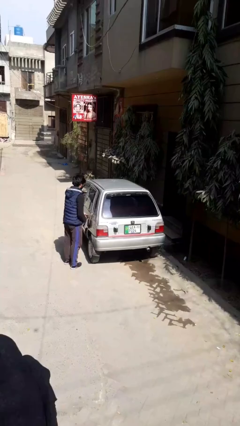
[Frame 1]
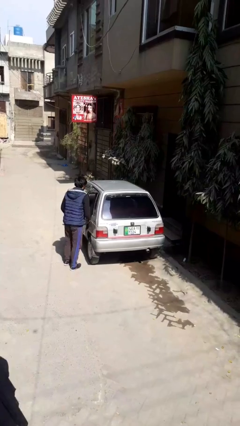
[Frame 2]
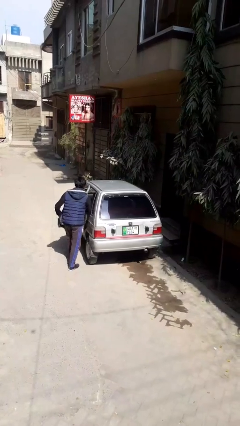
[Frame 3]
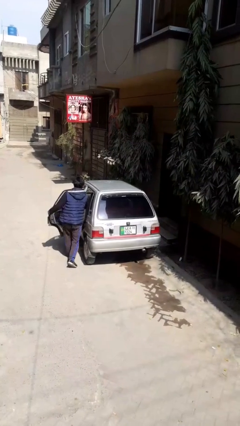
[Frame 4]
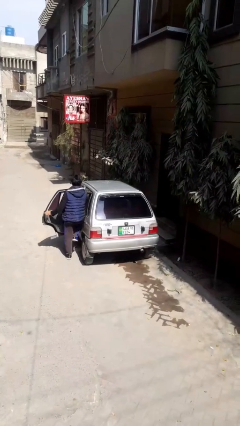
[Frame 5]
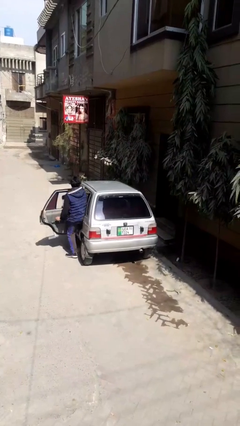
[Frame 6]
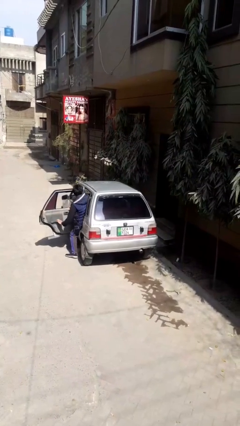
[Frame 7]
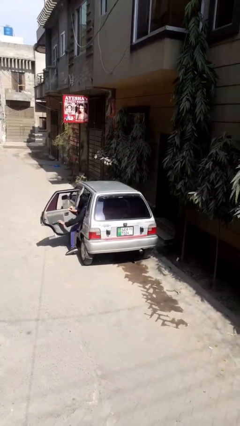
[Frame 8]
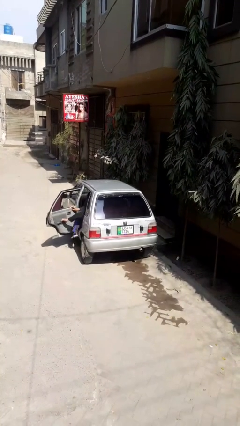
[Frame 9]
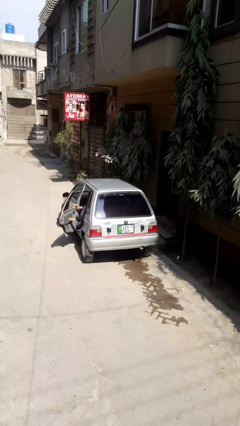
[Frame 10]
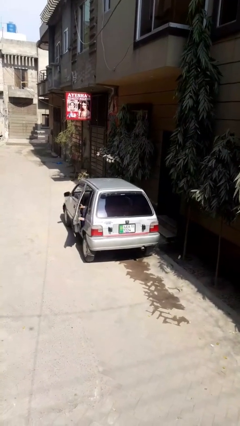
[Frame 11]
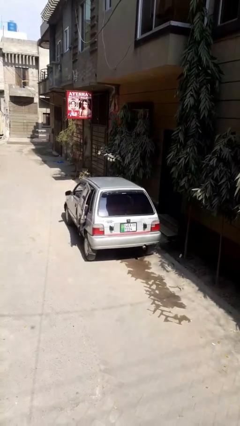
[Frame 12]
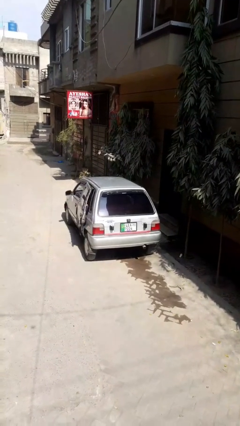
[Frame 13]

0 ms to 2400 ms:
car picks up person

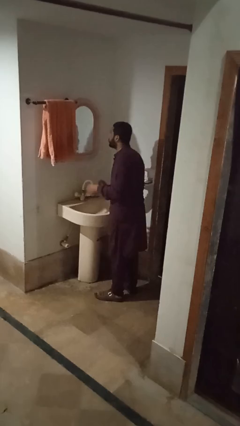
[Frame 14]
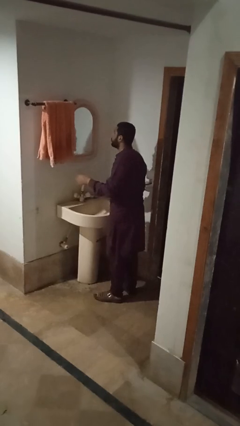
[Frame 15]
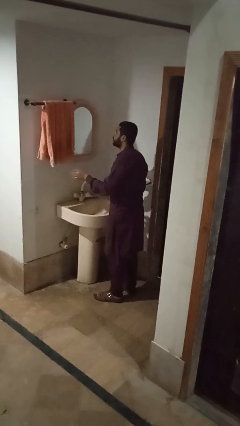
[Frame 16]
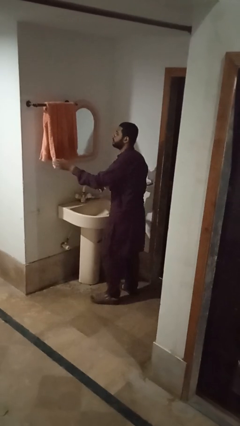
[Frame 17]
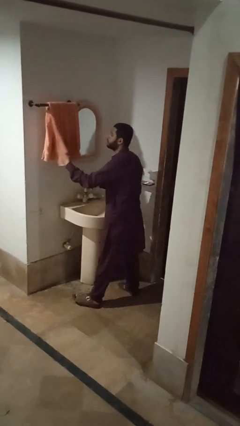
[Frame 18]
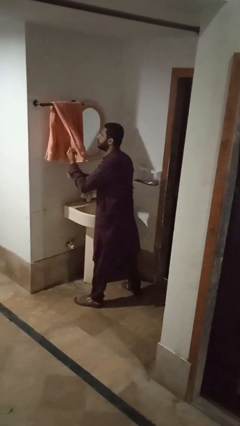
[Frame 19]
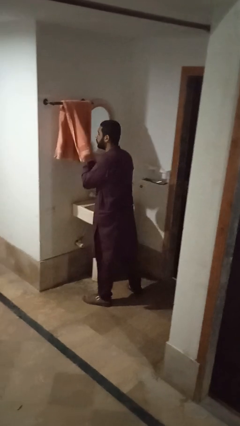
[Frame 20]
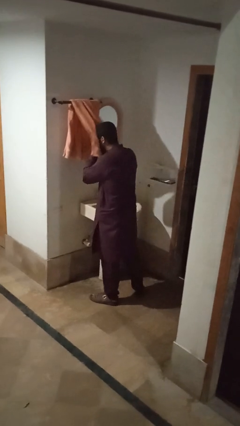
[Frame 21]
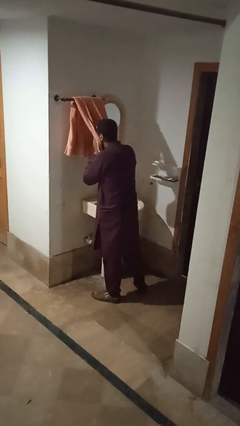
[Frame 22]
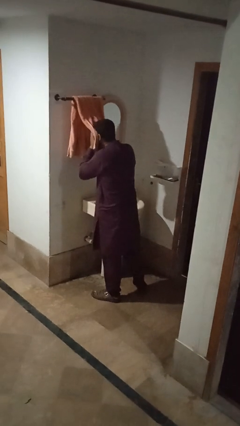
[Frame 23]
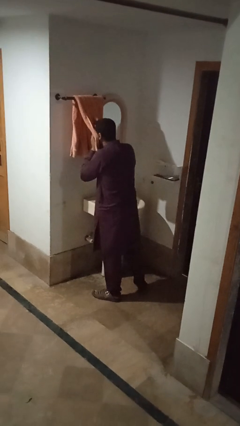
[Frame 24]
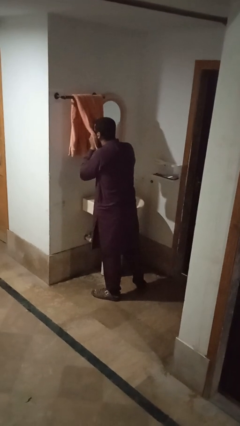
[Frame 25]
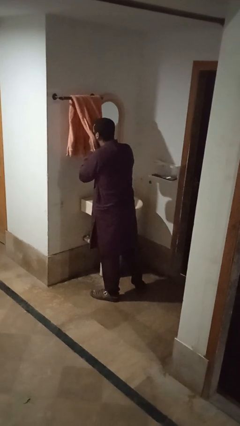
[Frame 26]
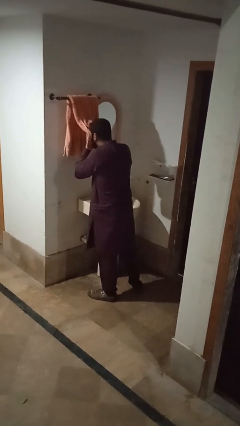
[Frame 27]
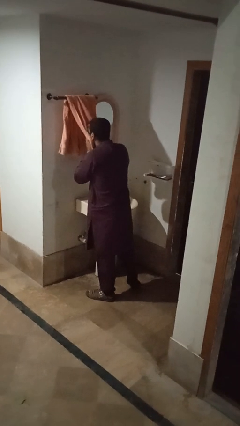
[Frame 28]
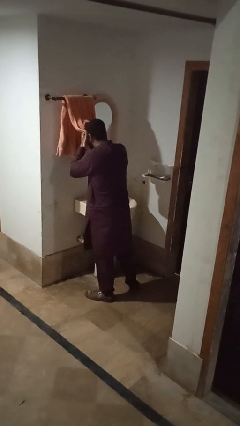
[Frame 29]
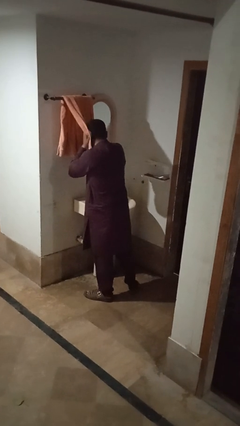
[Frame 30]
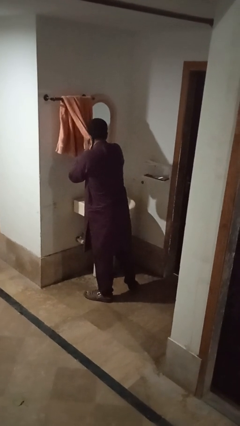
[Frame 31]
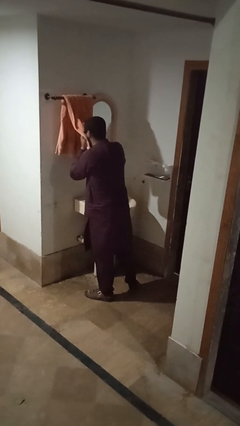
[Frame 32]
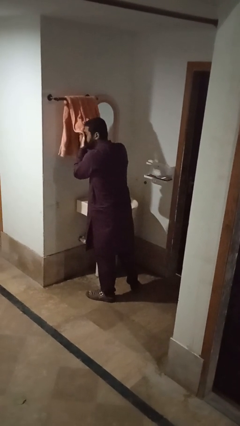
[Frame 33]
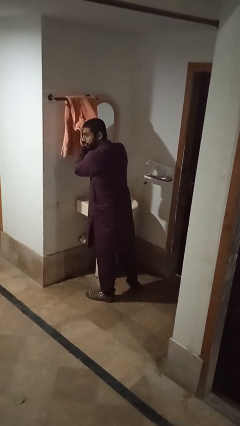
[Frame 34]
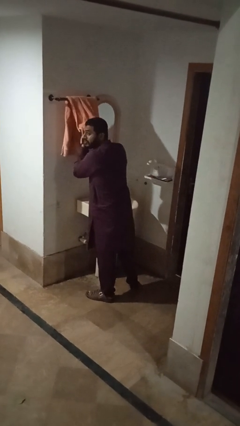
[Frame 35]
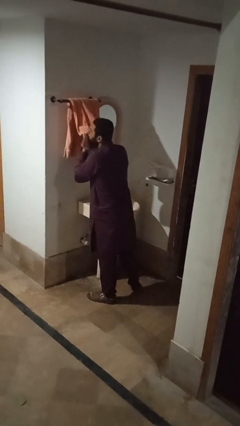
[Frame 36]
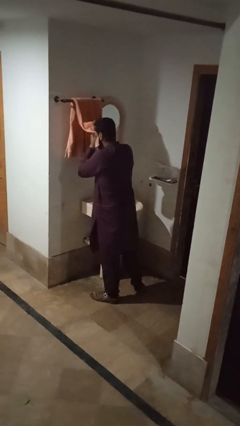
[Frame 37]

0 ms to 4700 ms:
person dries face with towel

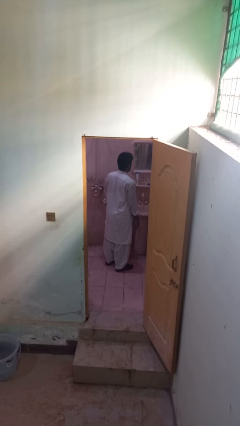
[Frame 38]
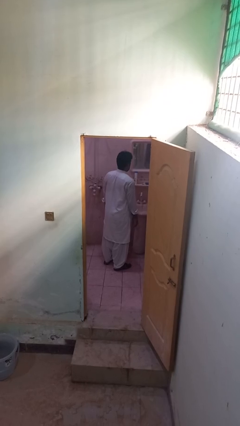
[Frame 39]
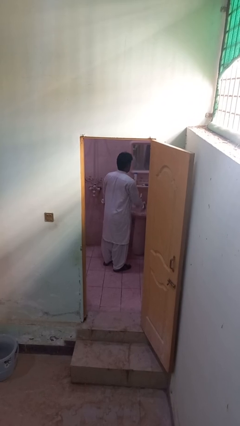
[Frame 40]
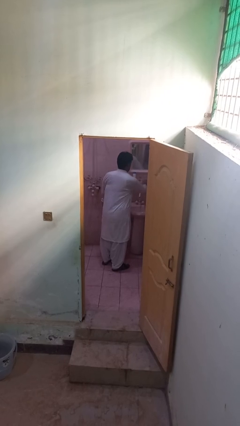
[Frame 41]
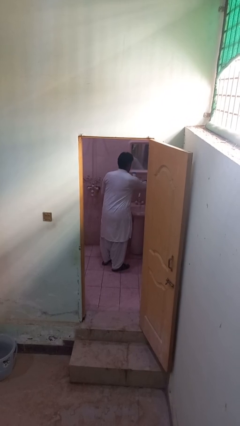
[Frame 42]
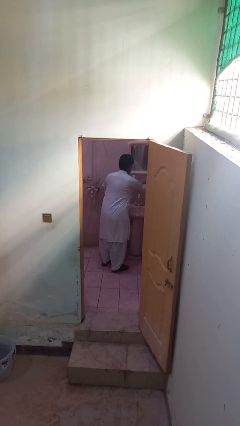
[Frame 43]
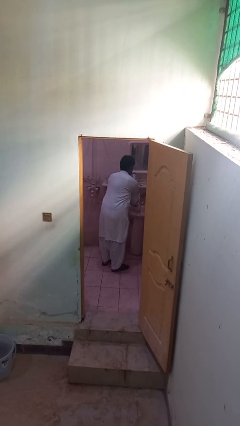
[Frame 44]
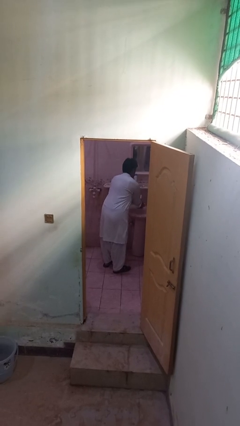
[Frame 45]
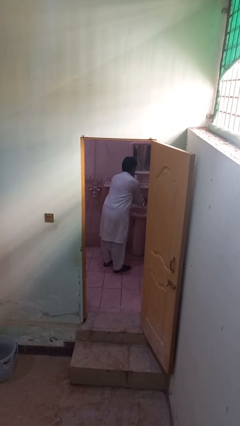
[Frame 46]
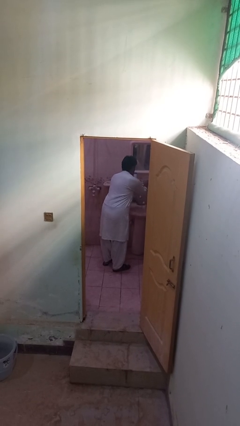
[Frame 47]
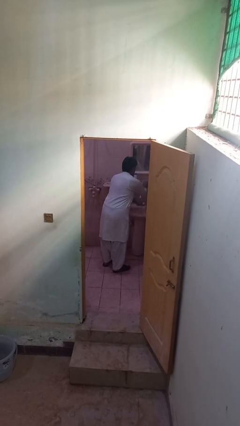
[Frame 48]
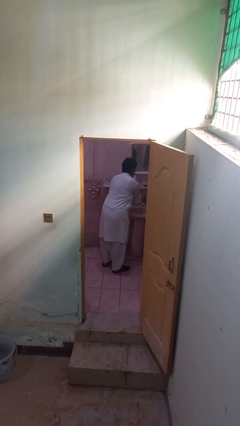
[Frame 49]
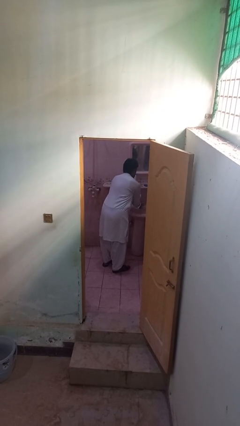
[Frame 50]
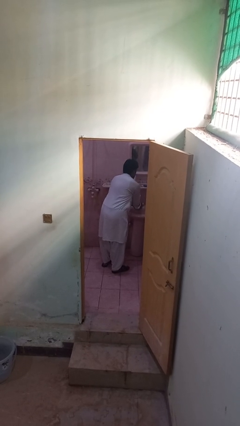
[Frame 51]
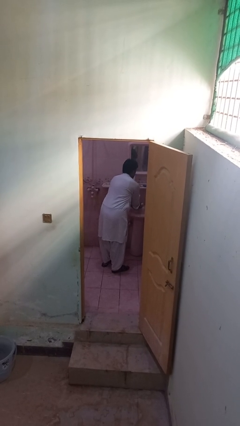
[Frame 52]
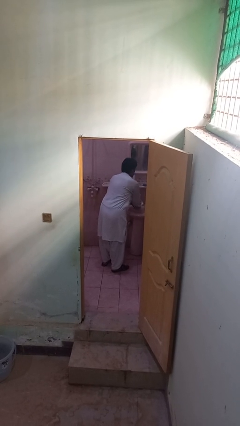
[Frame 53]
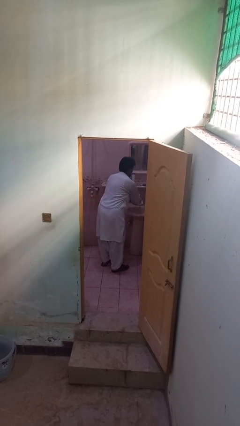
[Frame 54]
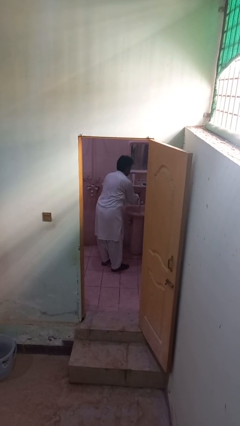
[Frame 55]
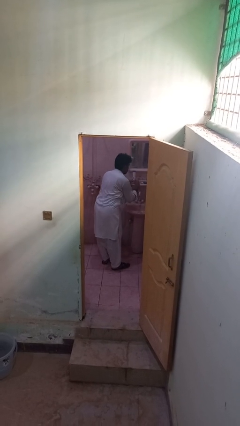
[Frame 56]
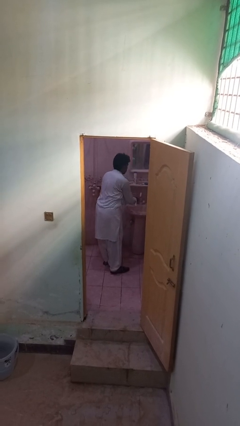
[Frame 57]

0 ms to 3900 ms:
person washes hands

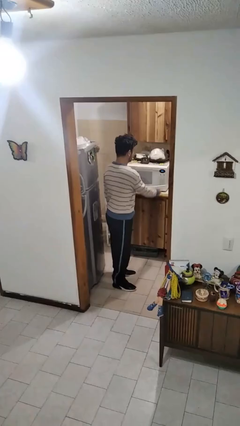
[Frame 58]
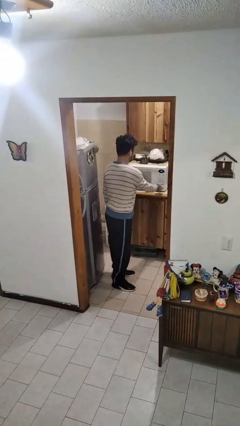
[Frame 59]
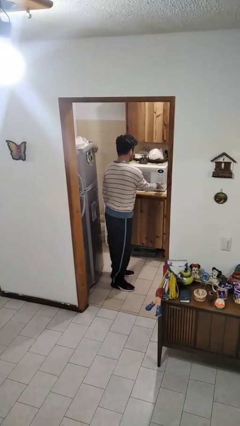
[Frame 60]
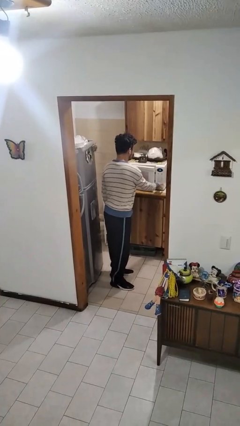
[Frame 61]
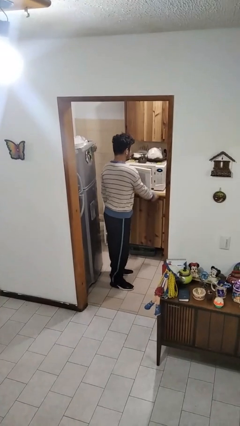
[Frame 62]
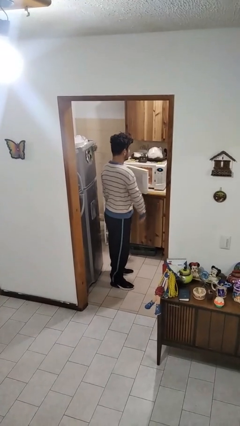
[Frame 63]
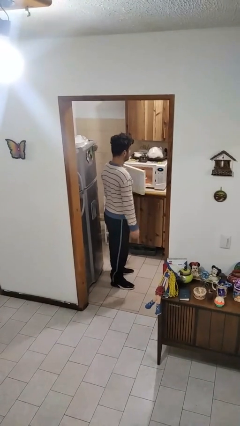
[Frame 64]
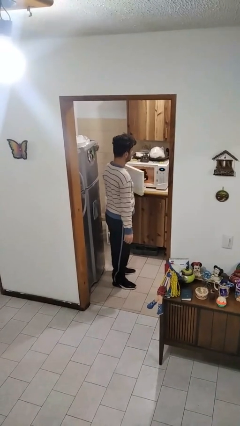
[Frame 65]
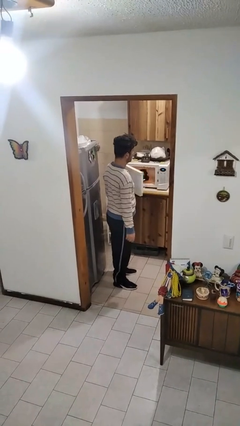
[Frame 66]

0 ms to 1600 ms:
person opens microwave

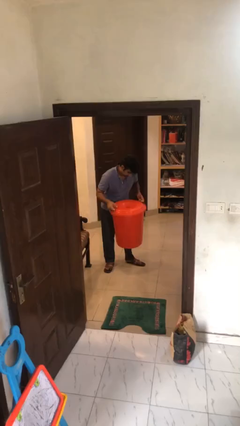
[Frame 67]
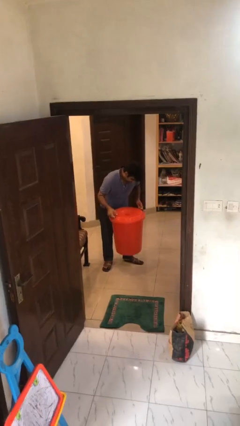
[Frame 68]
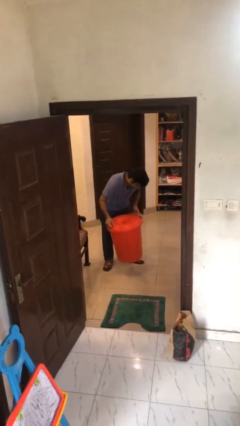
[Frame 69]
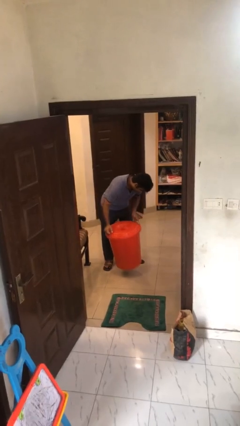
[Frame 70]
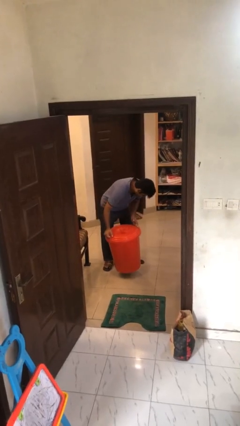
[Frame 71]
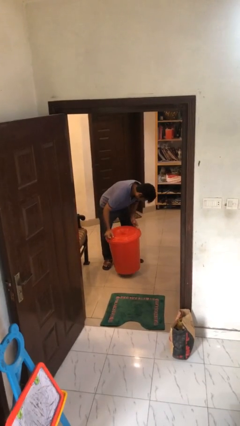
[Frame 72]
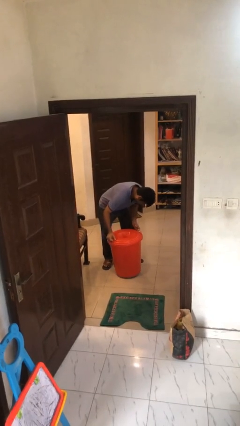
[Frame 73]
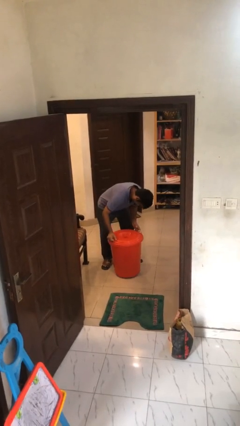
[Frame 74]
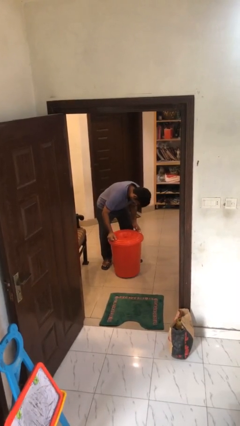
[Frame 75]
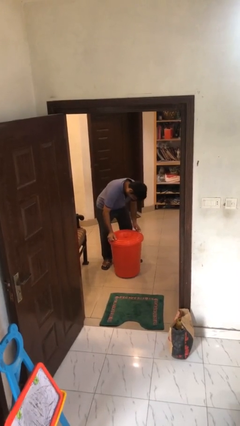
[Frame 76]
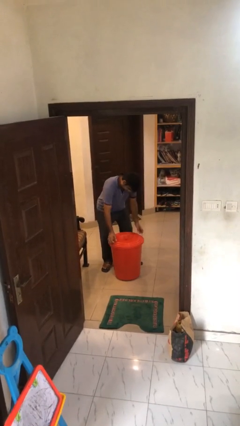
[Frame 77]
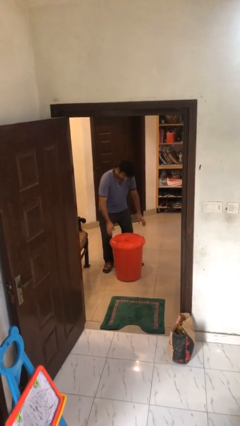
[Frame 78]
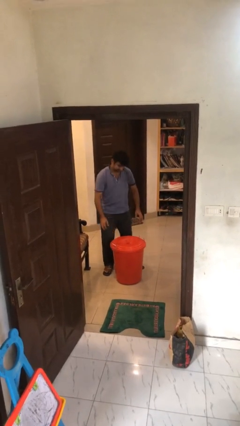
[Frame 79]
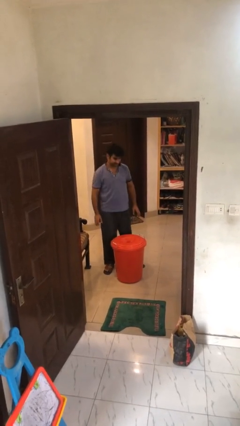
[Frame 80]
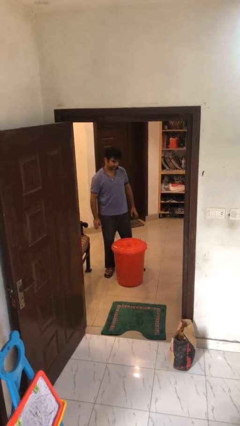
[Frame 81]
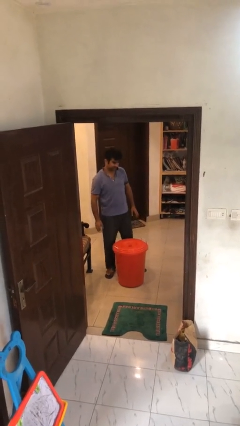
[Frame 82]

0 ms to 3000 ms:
person puts down object on floor

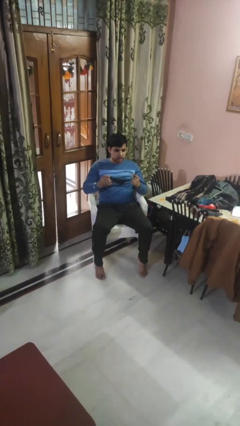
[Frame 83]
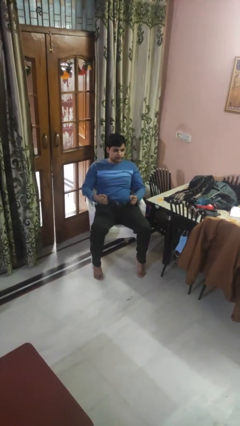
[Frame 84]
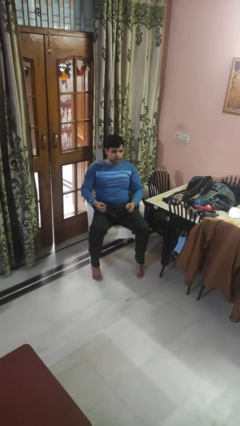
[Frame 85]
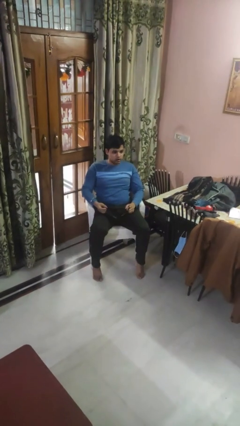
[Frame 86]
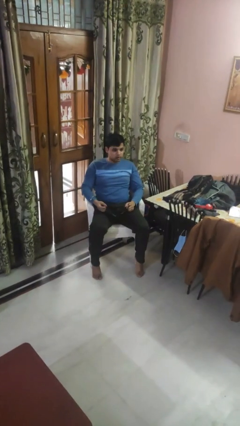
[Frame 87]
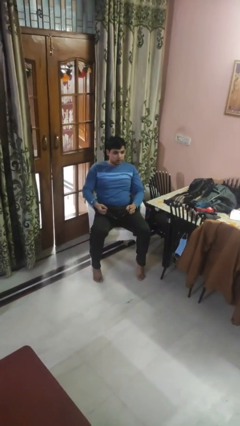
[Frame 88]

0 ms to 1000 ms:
person takes off facemask

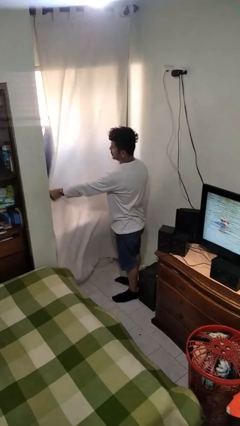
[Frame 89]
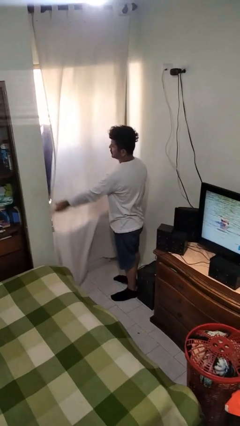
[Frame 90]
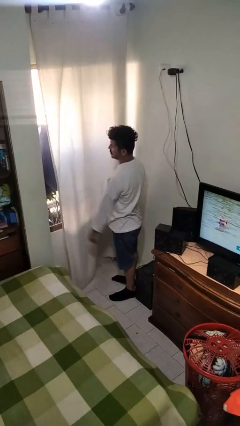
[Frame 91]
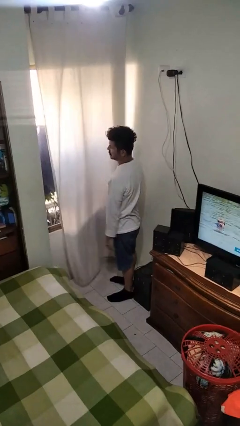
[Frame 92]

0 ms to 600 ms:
person closes curtains
